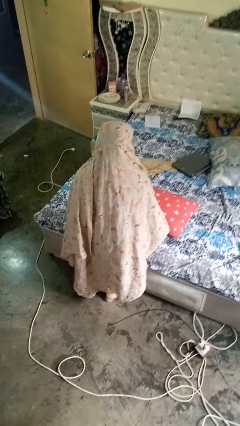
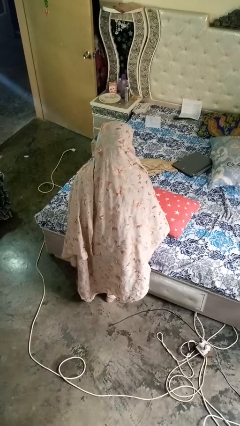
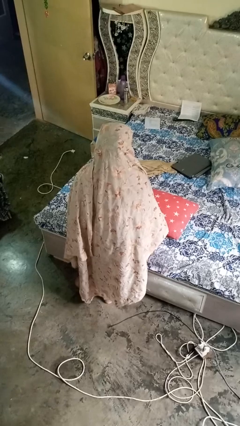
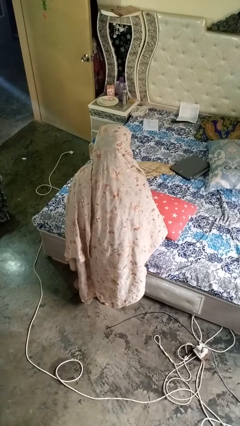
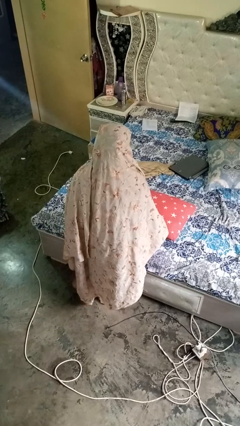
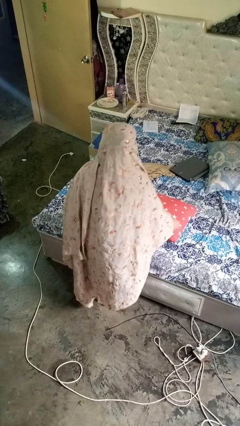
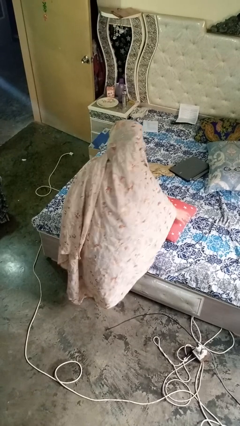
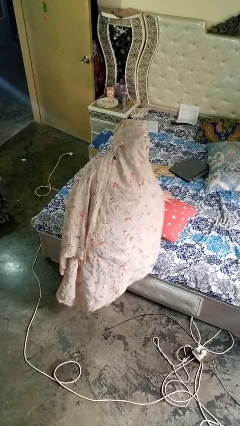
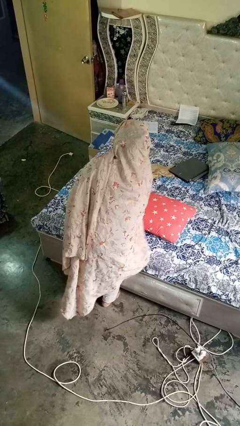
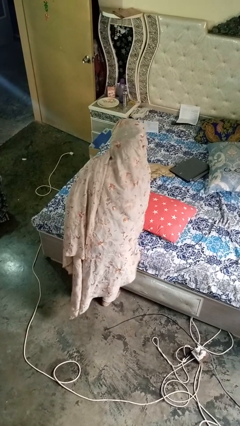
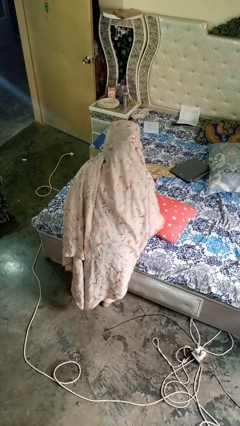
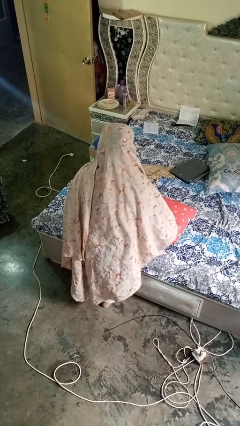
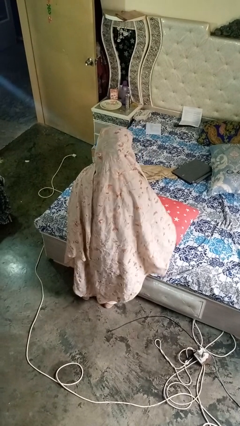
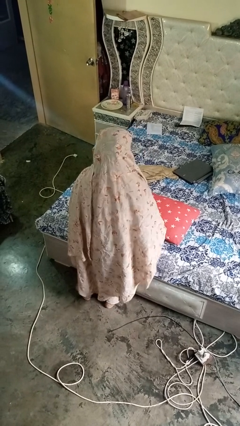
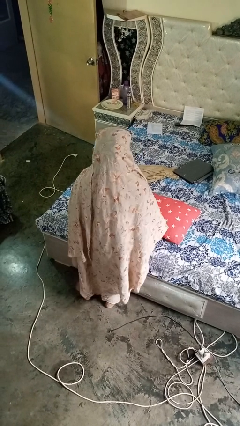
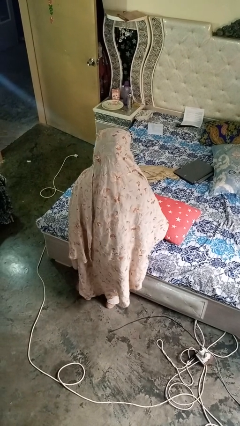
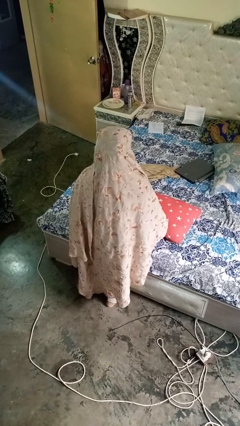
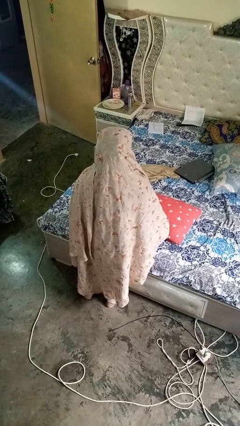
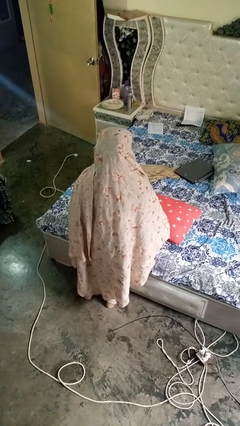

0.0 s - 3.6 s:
person waves hand over object

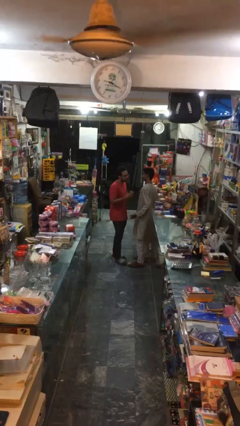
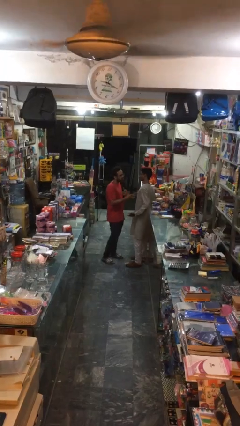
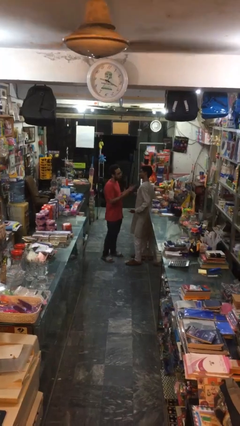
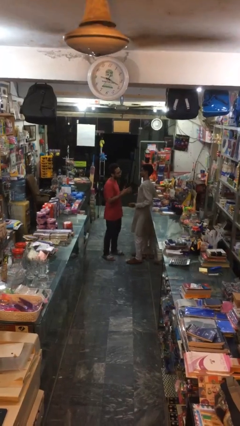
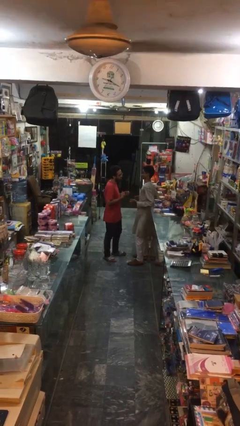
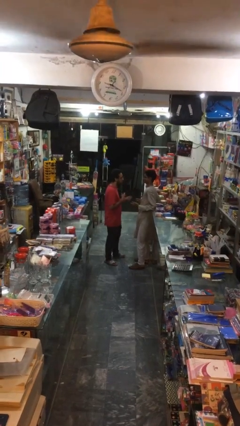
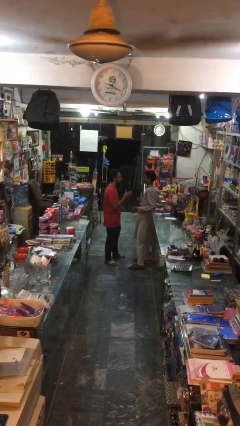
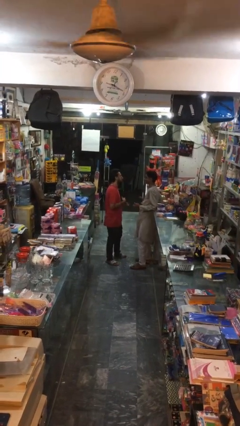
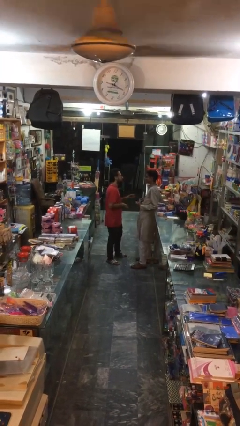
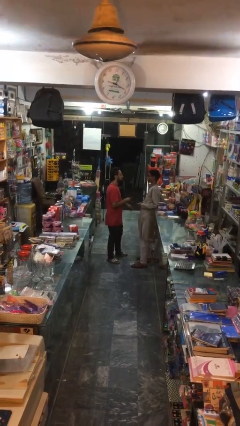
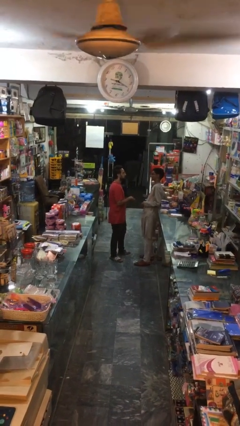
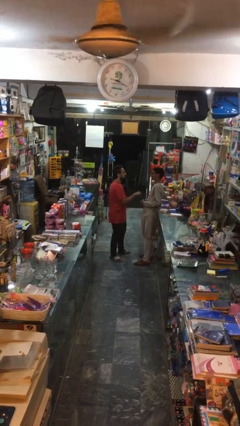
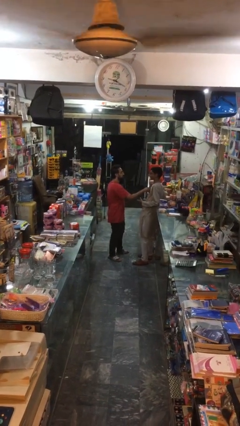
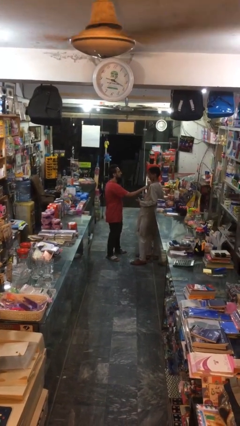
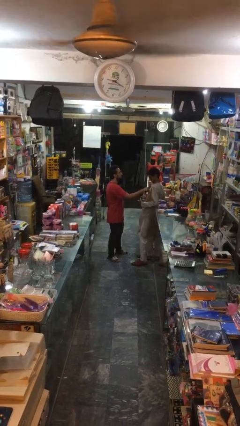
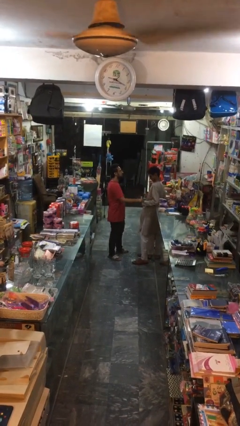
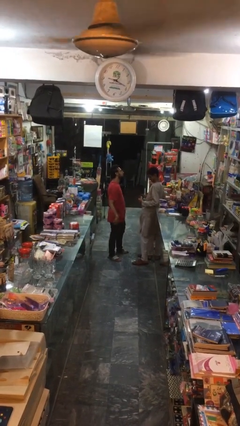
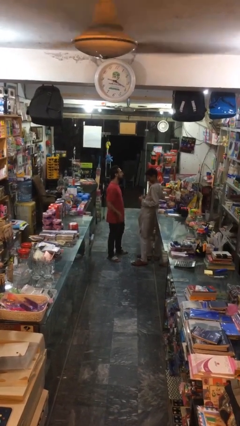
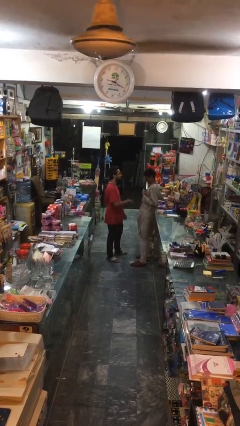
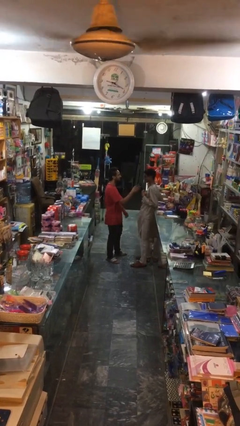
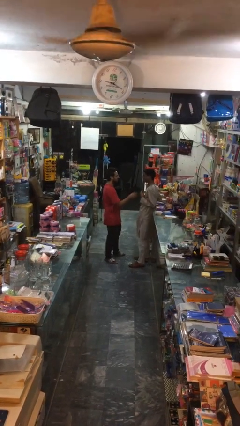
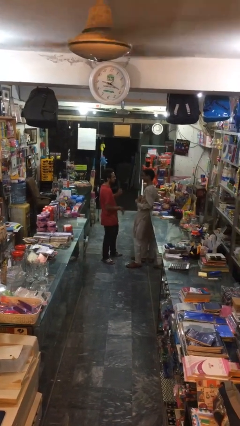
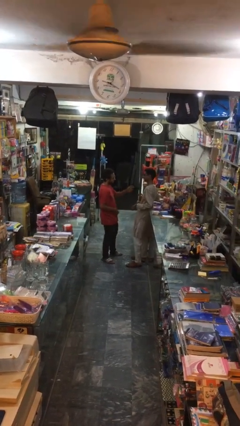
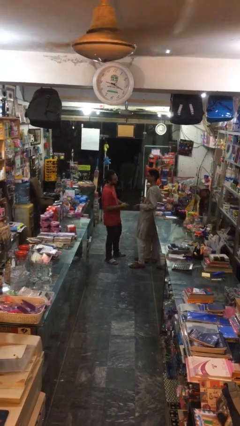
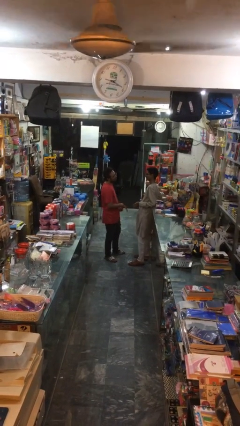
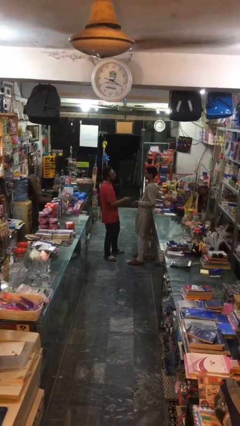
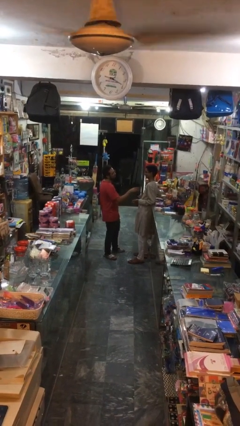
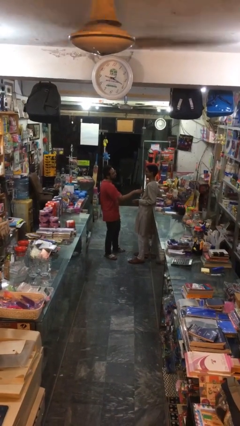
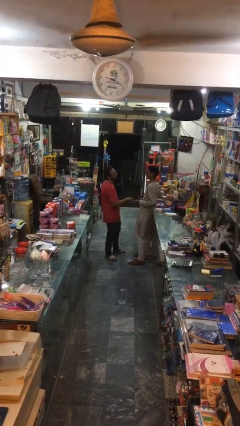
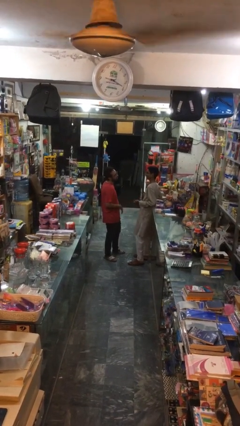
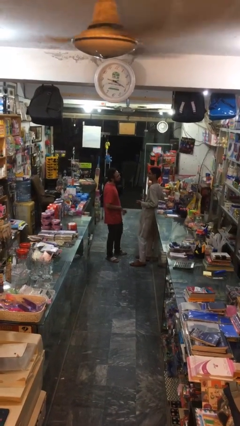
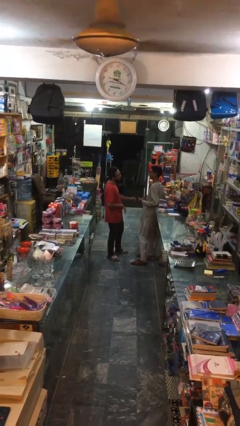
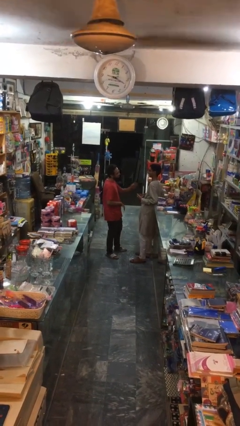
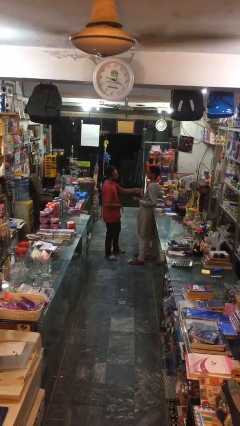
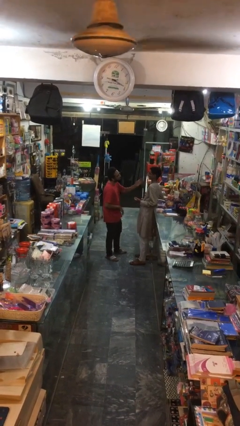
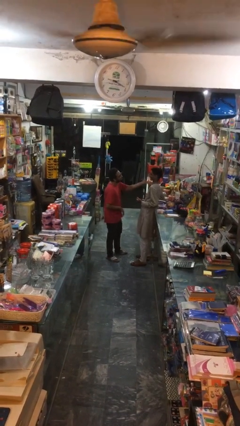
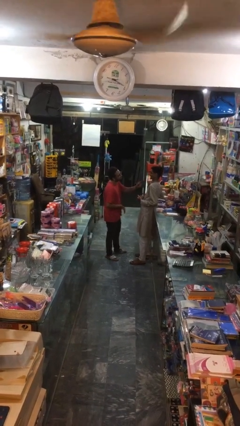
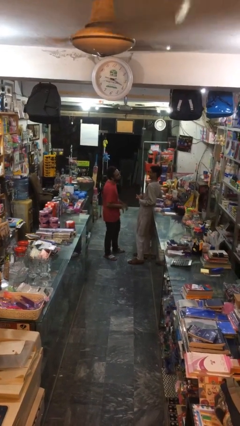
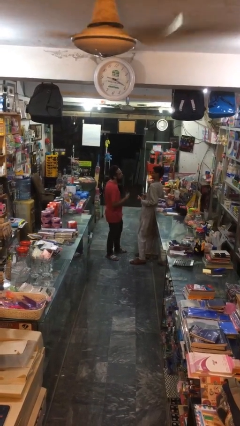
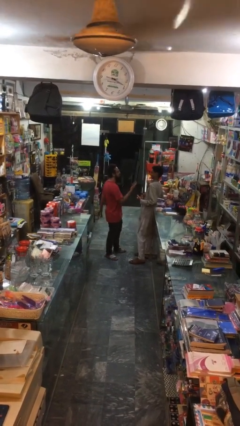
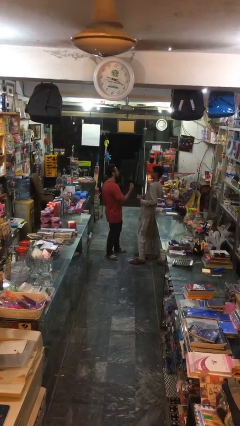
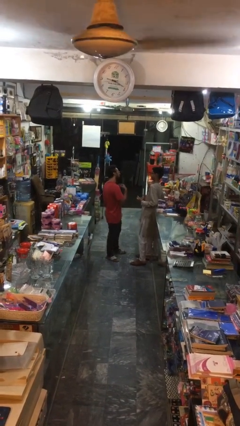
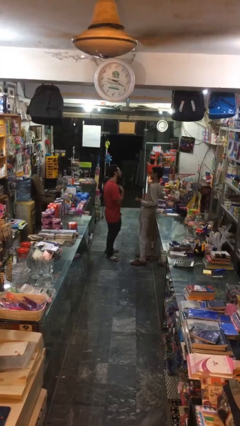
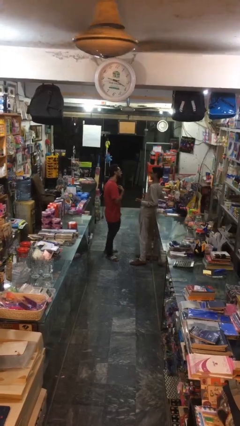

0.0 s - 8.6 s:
person talks to person

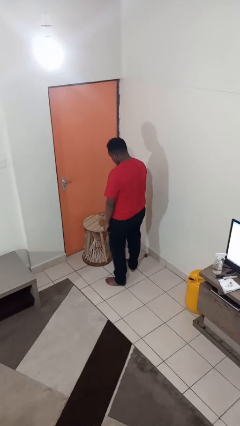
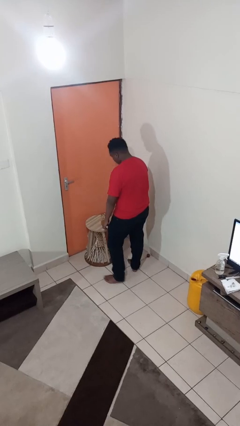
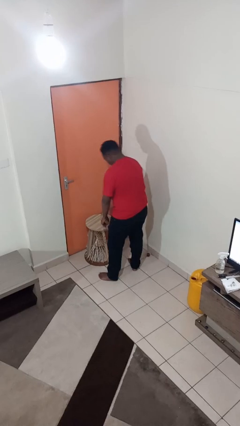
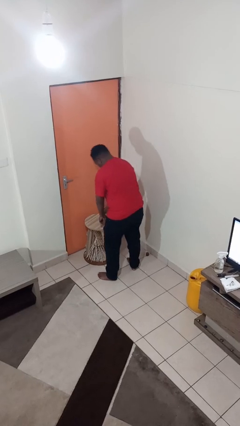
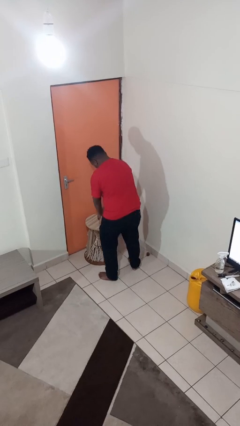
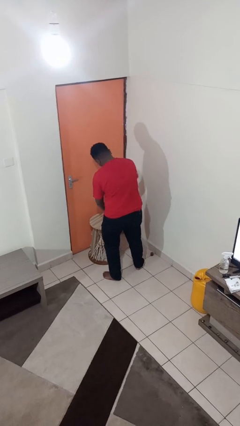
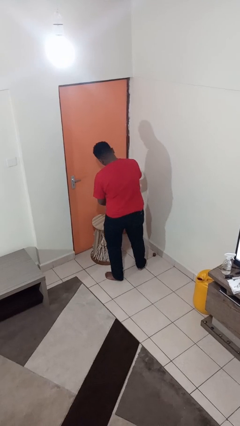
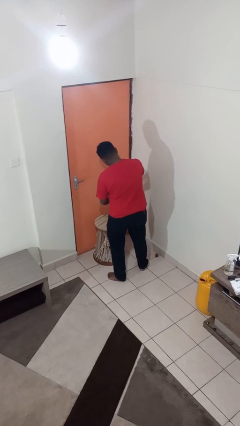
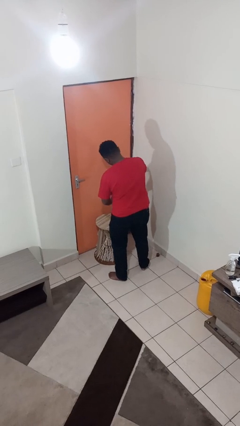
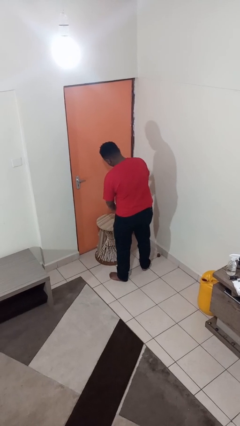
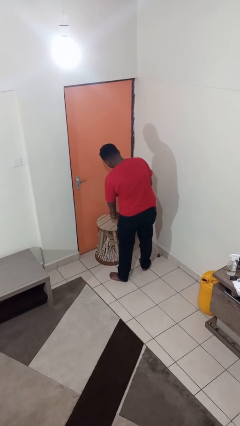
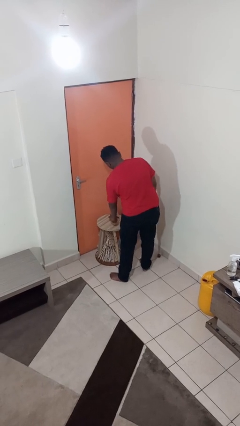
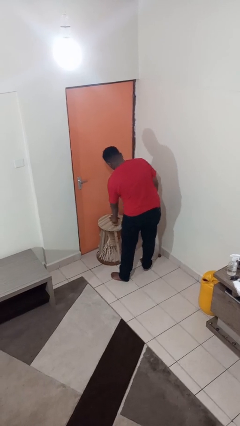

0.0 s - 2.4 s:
person opens jar

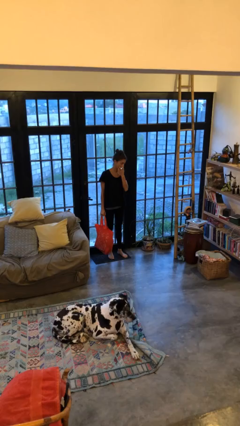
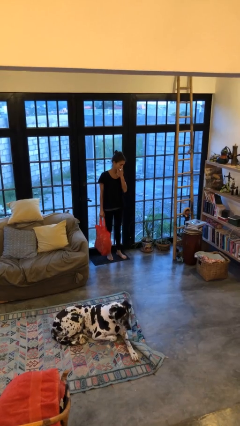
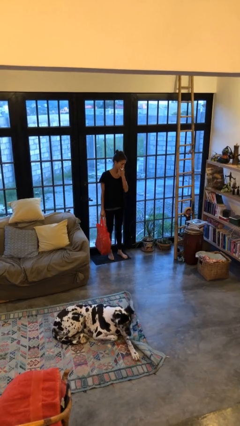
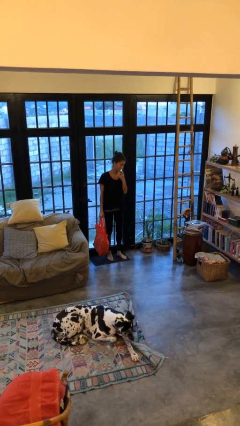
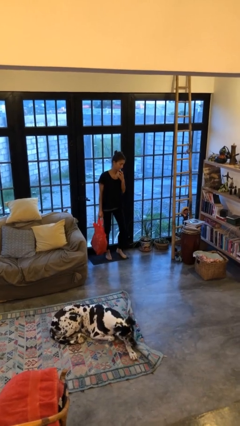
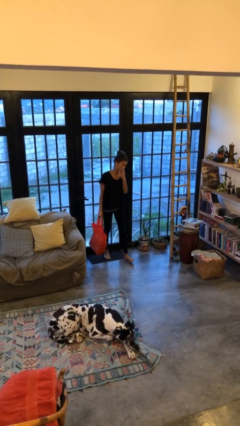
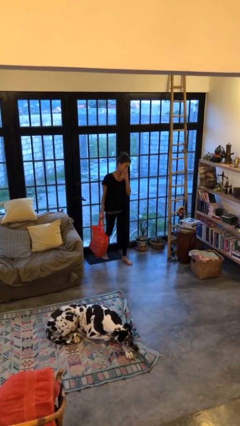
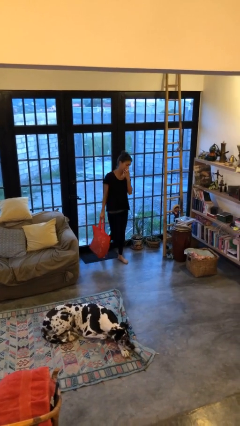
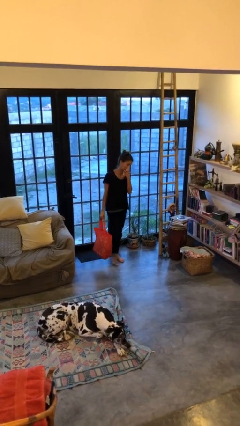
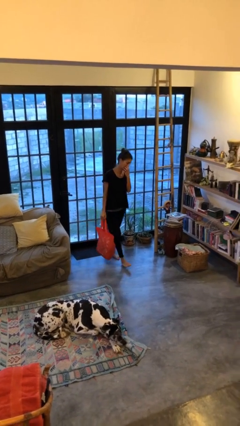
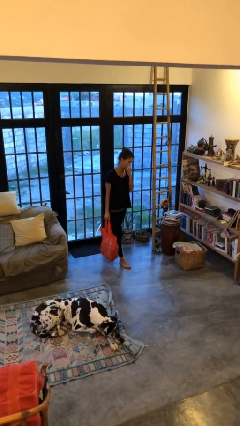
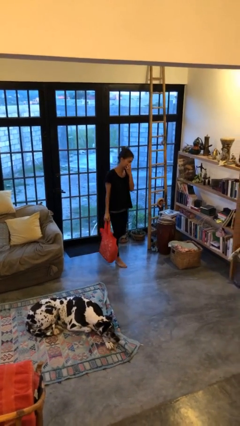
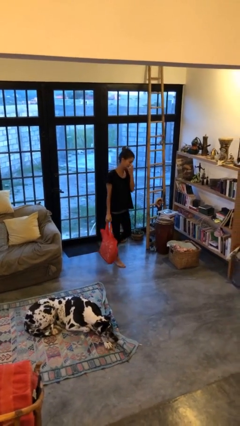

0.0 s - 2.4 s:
person carries groceries

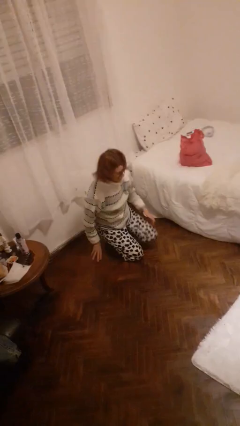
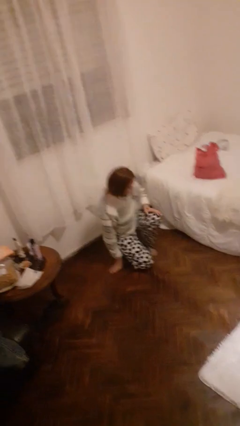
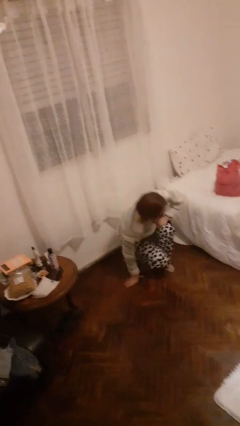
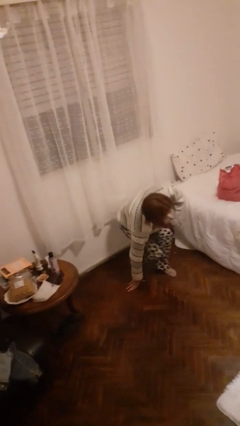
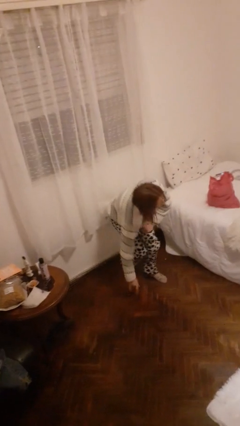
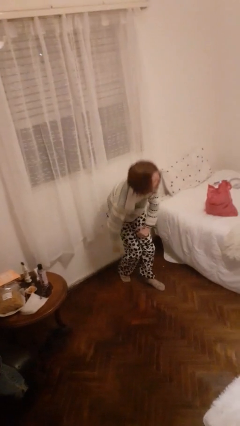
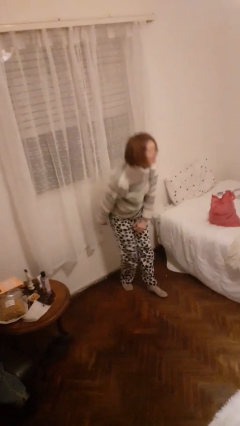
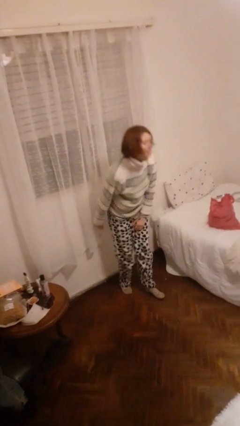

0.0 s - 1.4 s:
person stands up from floor
